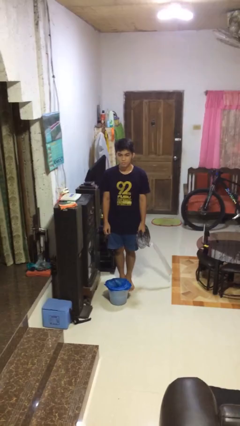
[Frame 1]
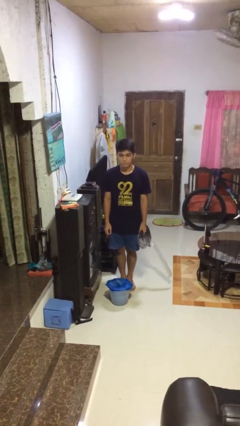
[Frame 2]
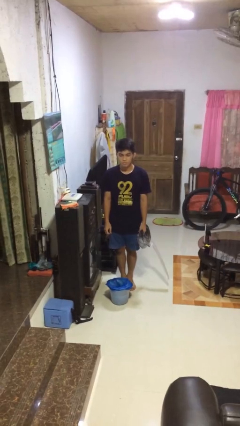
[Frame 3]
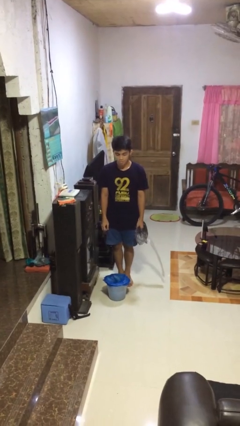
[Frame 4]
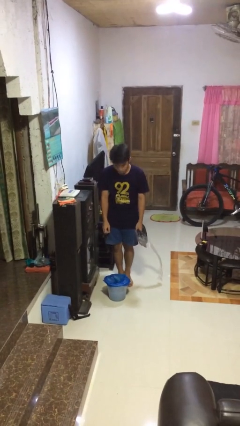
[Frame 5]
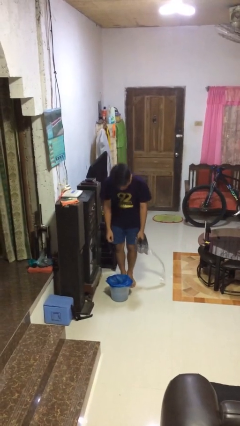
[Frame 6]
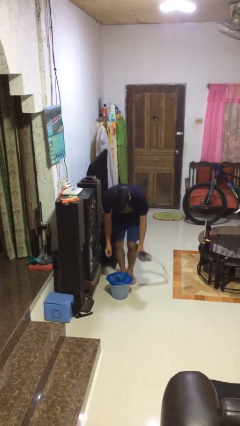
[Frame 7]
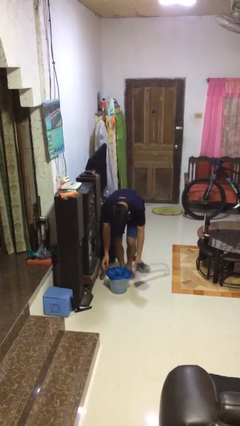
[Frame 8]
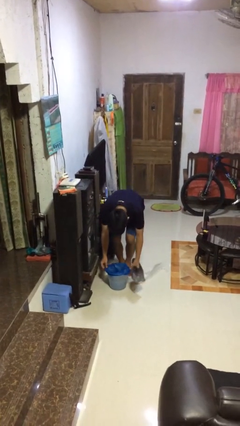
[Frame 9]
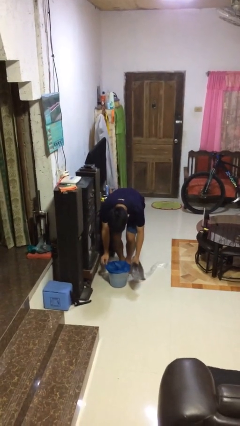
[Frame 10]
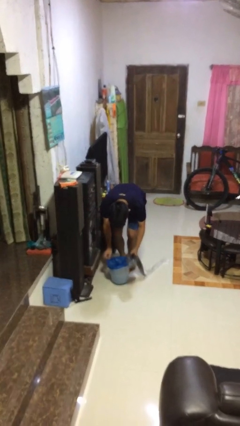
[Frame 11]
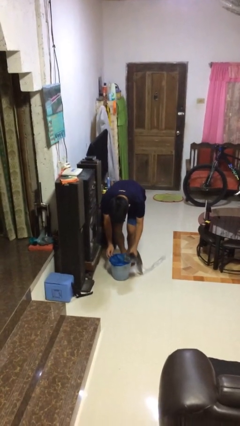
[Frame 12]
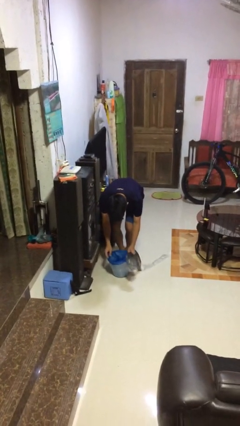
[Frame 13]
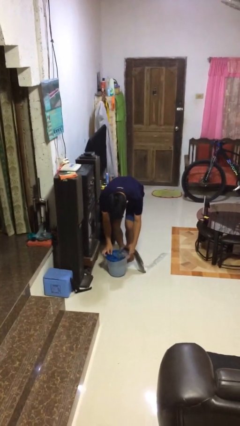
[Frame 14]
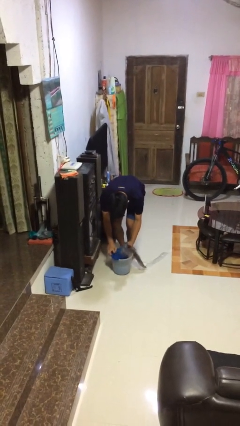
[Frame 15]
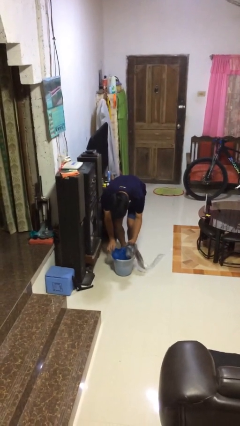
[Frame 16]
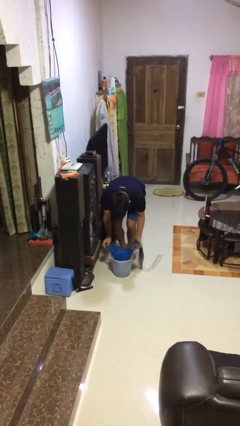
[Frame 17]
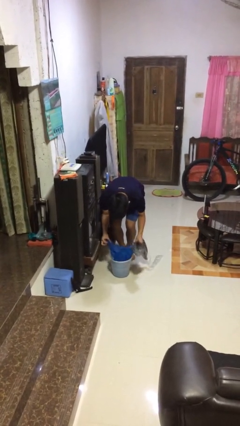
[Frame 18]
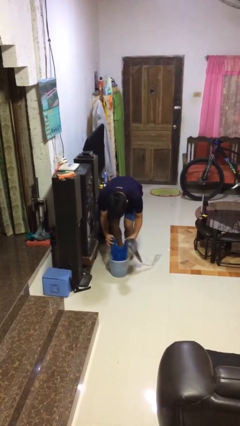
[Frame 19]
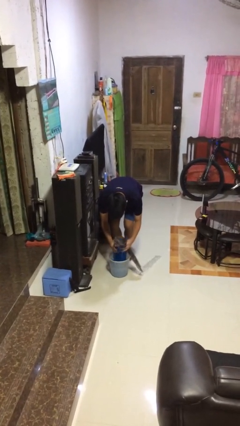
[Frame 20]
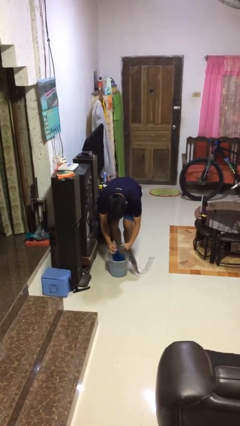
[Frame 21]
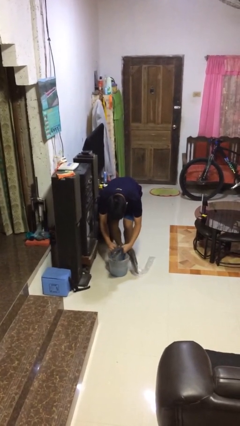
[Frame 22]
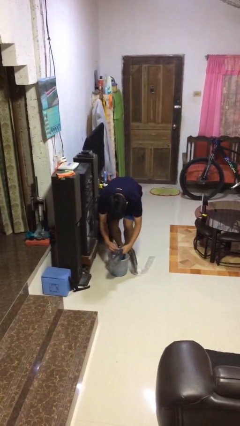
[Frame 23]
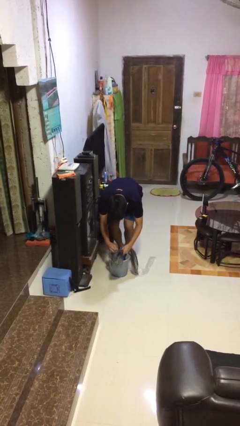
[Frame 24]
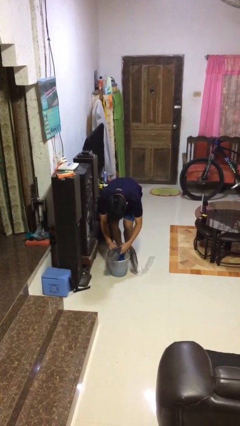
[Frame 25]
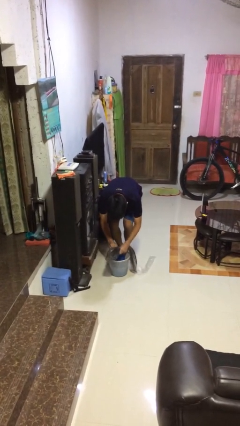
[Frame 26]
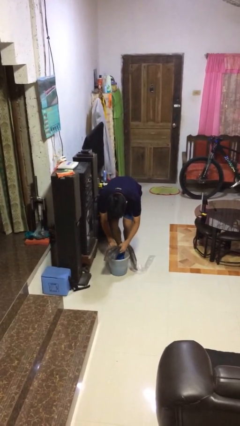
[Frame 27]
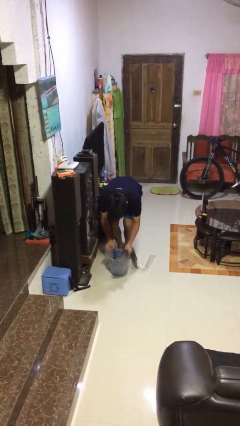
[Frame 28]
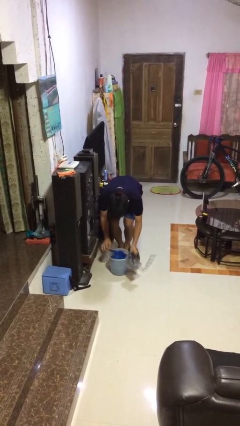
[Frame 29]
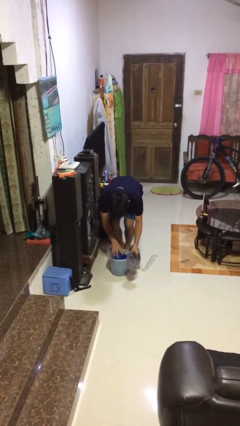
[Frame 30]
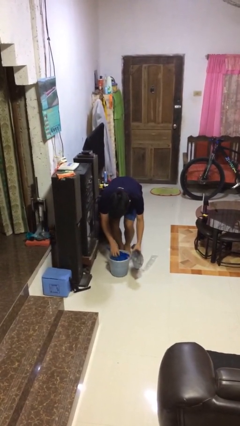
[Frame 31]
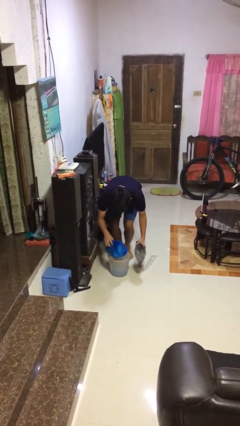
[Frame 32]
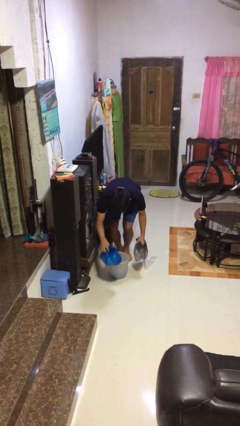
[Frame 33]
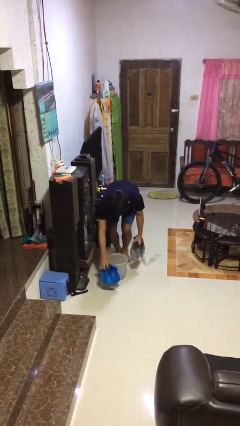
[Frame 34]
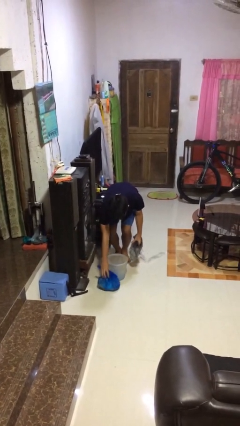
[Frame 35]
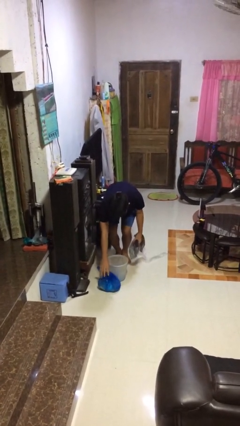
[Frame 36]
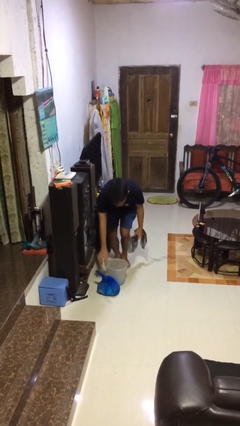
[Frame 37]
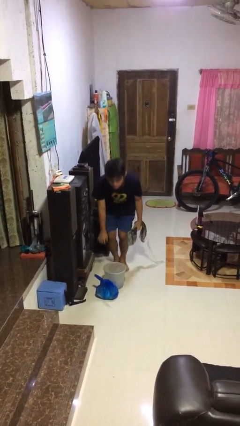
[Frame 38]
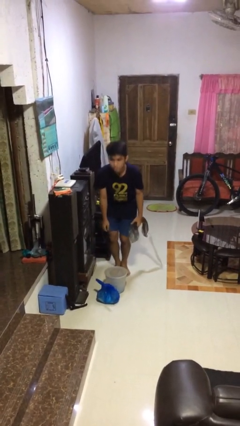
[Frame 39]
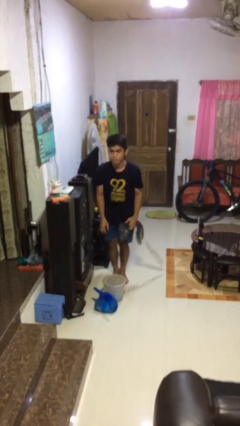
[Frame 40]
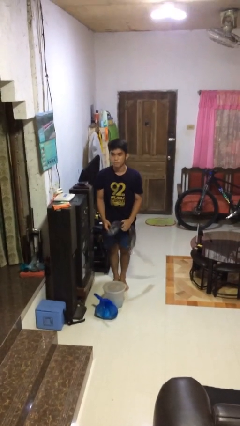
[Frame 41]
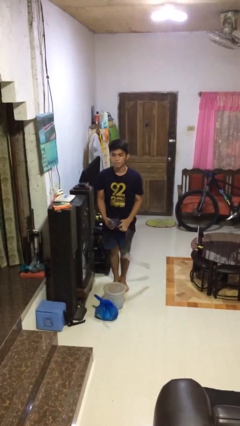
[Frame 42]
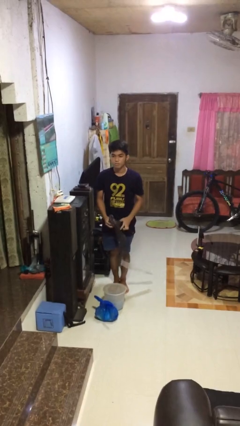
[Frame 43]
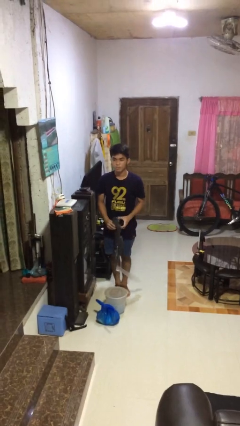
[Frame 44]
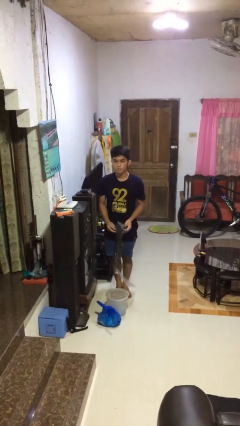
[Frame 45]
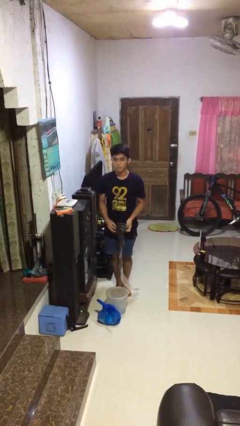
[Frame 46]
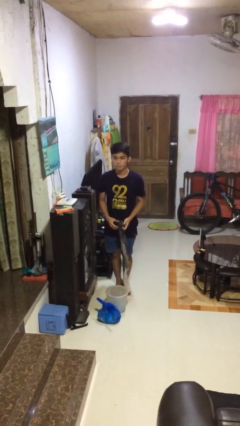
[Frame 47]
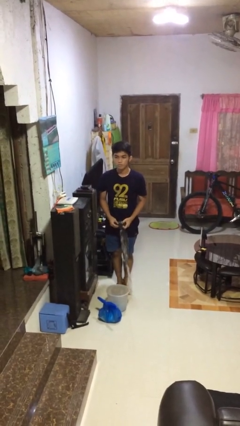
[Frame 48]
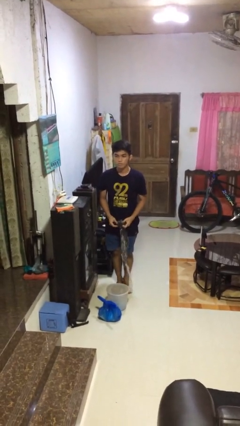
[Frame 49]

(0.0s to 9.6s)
person removes trashbag from trashcan

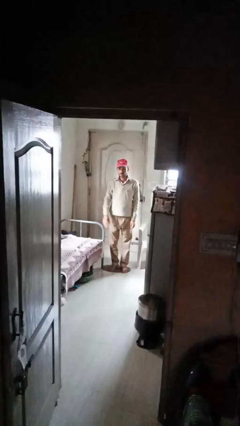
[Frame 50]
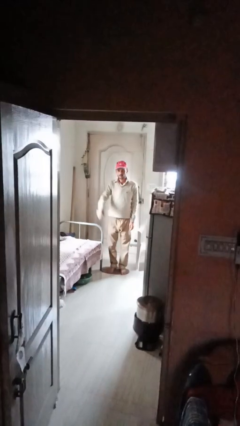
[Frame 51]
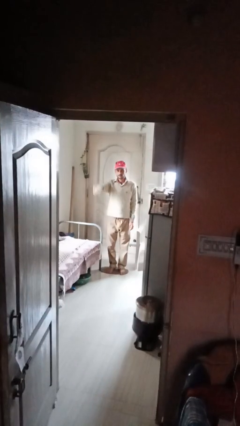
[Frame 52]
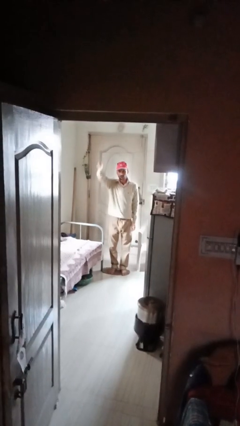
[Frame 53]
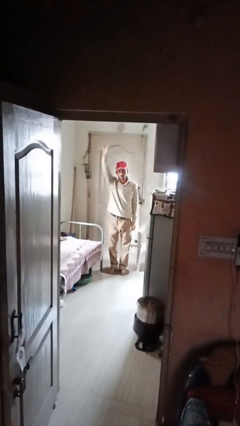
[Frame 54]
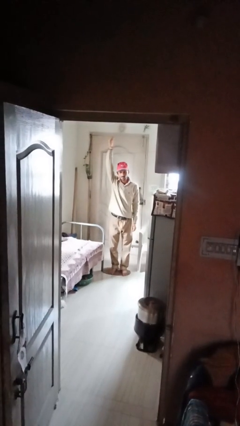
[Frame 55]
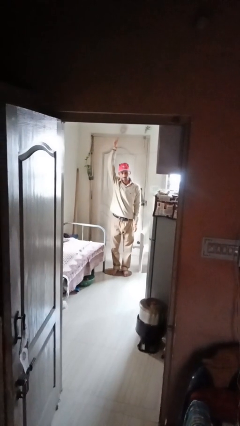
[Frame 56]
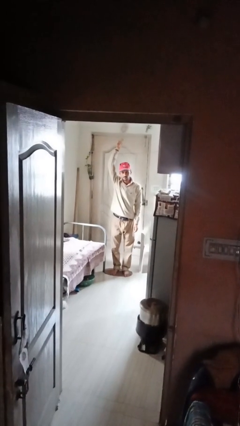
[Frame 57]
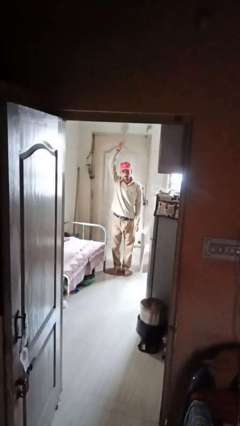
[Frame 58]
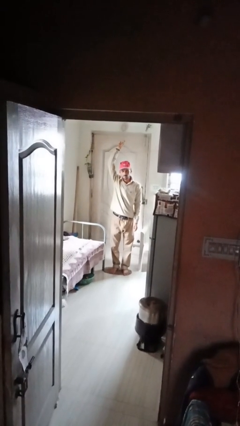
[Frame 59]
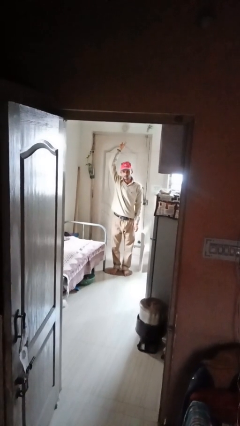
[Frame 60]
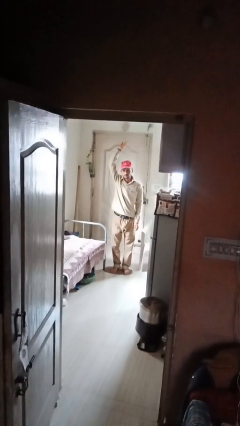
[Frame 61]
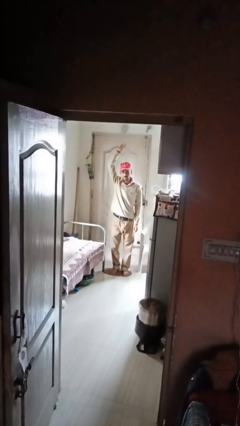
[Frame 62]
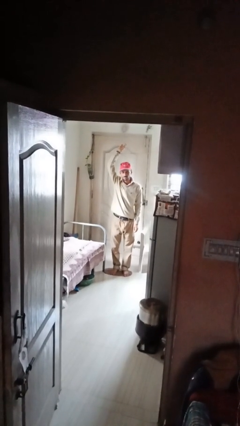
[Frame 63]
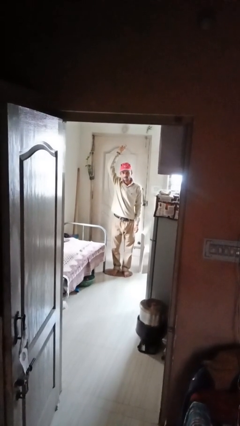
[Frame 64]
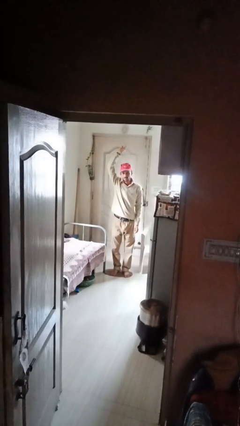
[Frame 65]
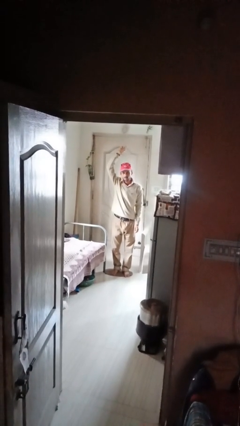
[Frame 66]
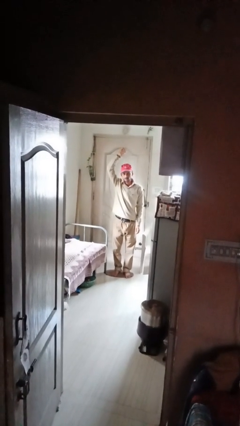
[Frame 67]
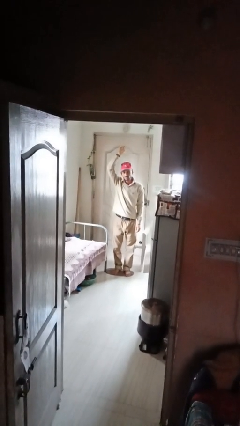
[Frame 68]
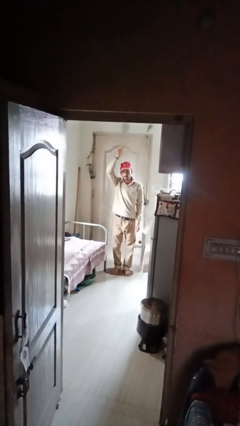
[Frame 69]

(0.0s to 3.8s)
person gestures swipe up
